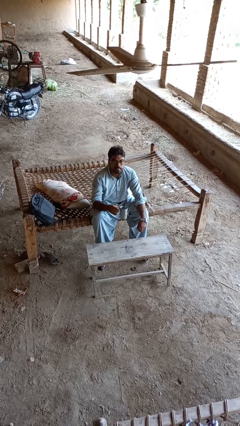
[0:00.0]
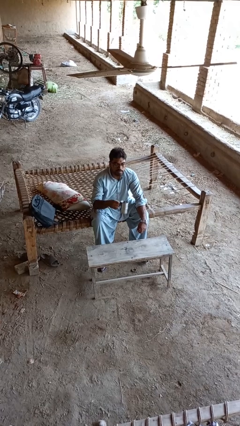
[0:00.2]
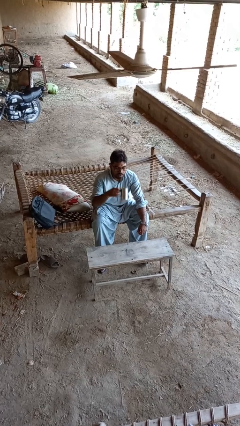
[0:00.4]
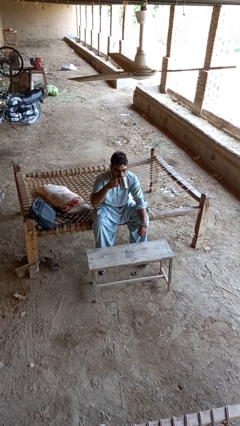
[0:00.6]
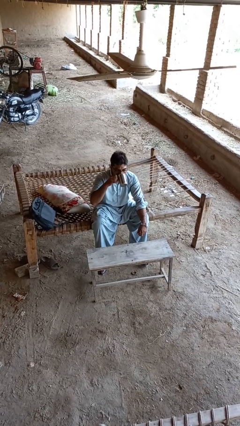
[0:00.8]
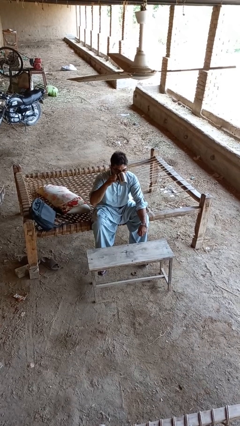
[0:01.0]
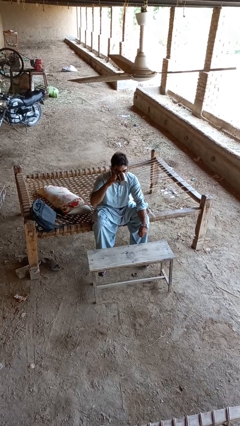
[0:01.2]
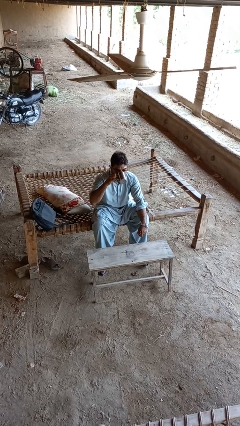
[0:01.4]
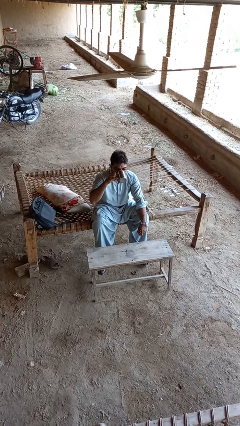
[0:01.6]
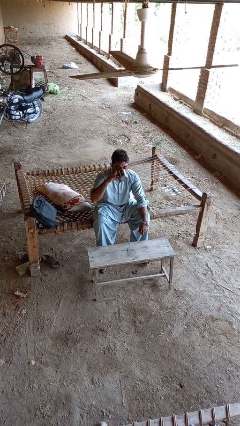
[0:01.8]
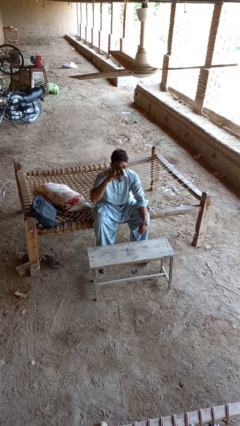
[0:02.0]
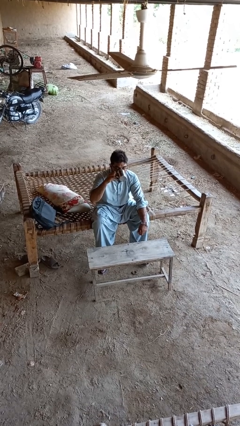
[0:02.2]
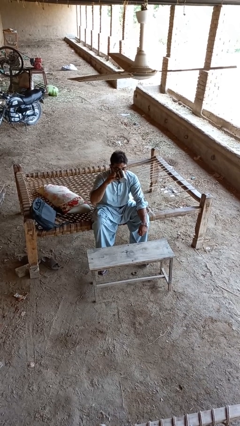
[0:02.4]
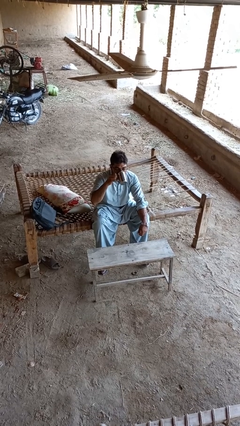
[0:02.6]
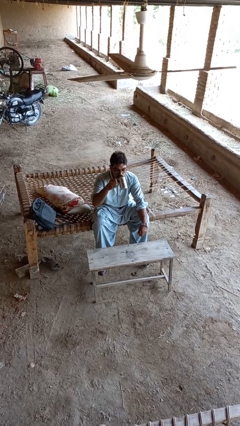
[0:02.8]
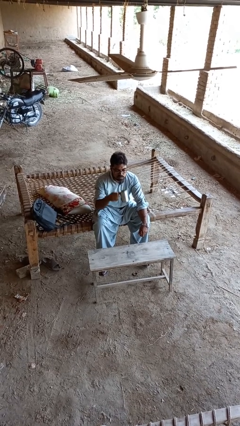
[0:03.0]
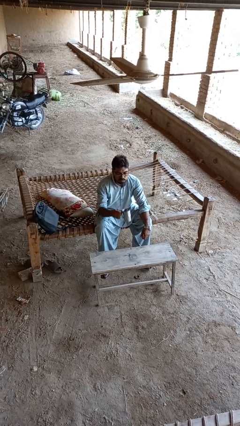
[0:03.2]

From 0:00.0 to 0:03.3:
person drinks from mug

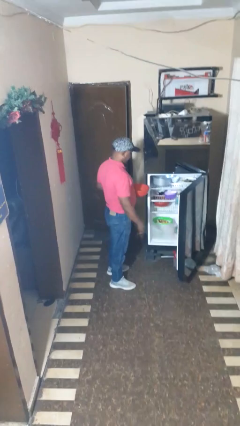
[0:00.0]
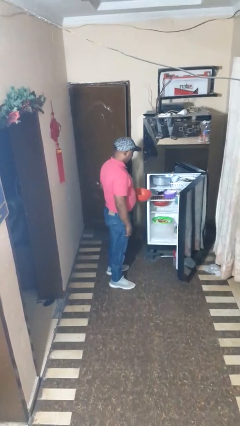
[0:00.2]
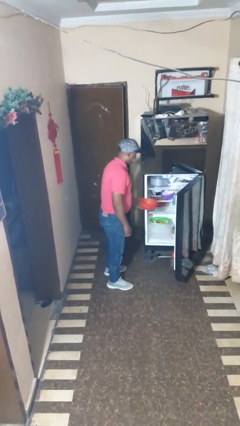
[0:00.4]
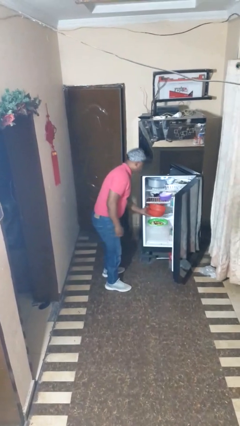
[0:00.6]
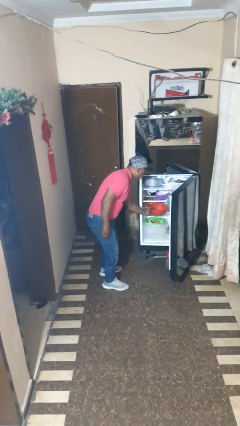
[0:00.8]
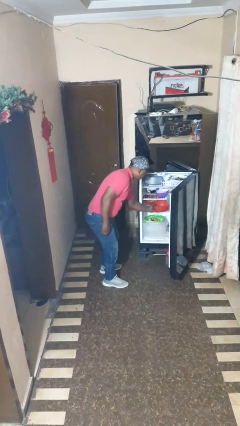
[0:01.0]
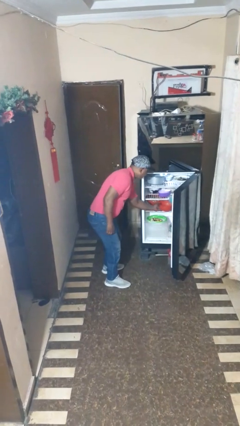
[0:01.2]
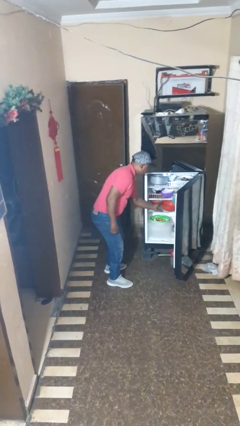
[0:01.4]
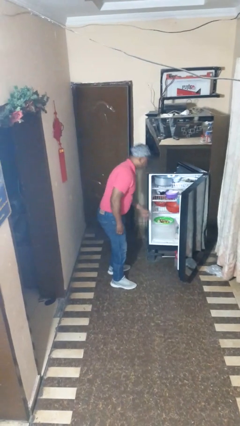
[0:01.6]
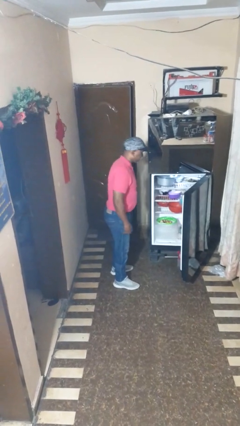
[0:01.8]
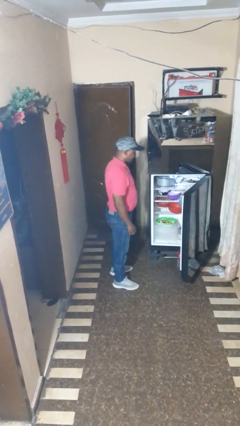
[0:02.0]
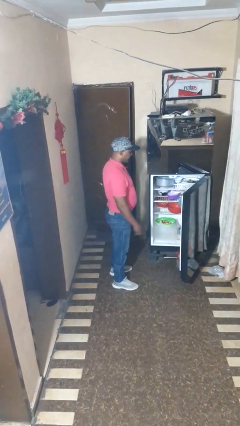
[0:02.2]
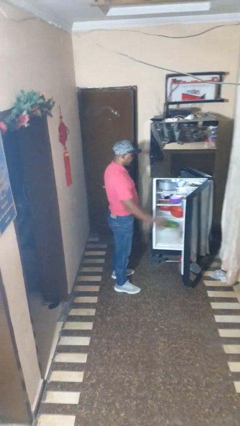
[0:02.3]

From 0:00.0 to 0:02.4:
person puts object into refrigerator

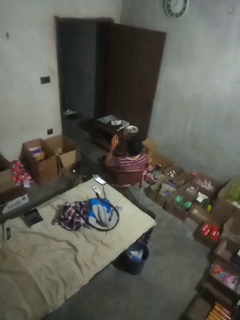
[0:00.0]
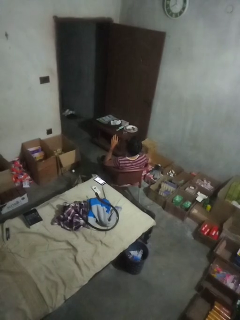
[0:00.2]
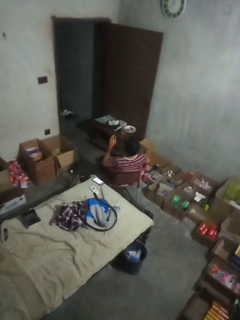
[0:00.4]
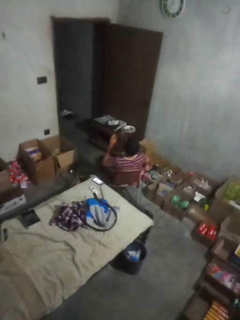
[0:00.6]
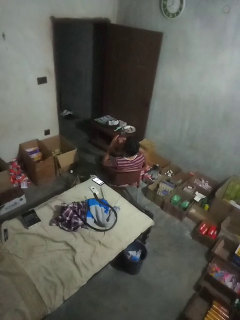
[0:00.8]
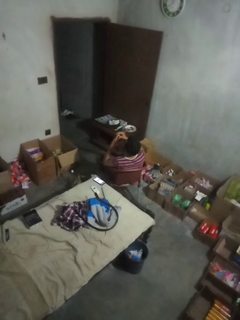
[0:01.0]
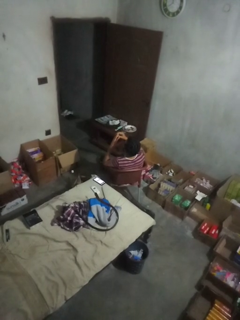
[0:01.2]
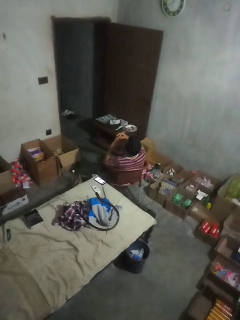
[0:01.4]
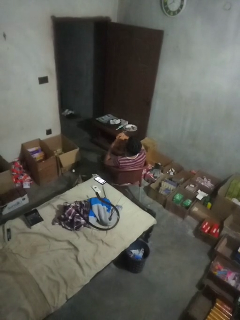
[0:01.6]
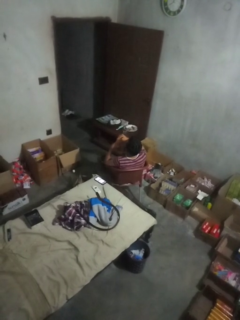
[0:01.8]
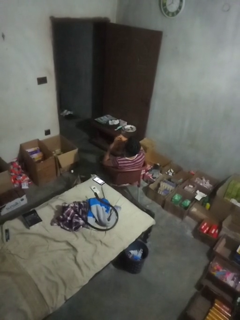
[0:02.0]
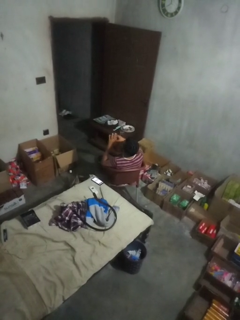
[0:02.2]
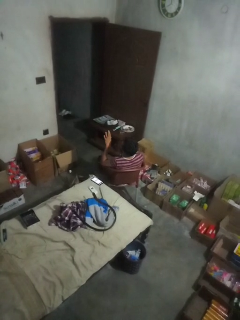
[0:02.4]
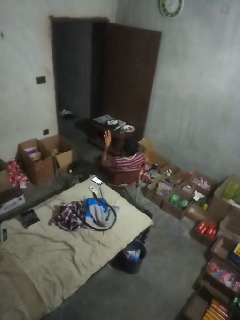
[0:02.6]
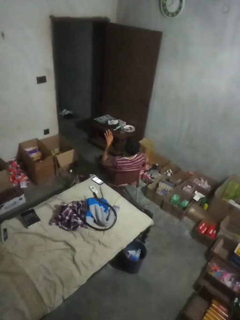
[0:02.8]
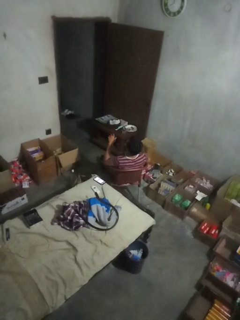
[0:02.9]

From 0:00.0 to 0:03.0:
person puts on ring

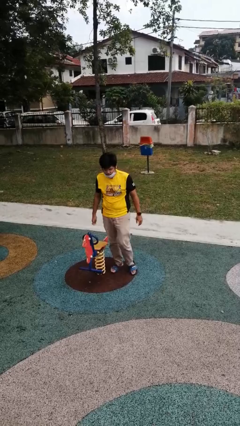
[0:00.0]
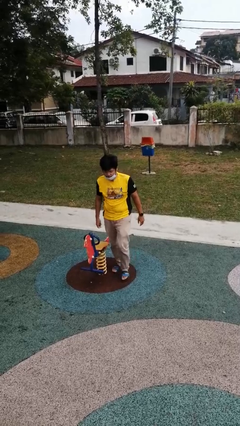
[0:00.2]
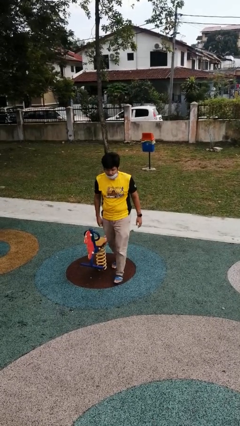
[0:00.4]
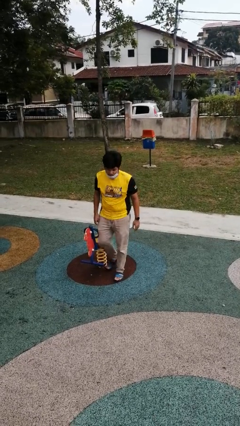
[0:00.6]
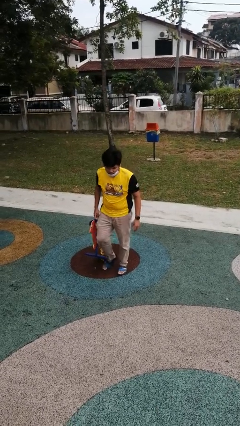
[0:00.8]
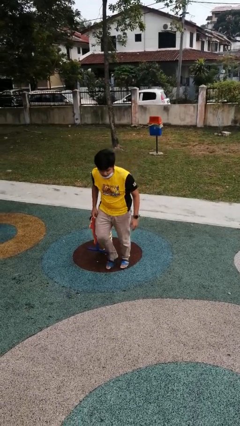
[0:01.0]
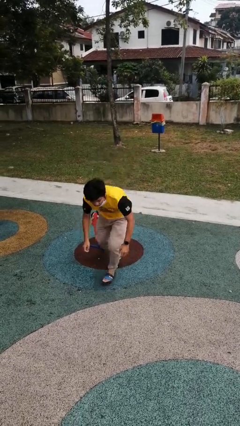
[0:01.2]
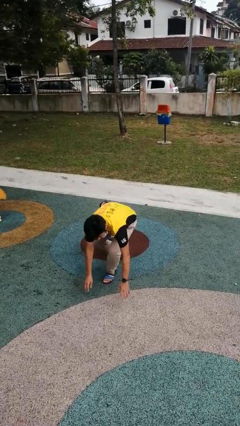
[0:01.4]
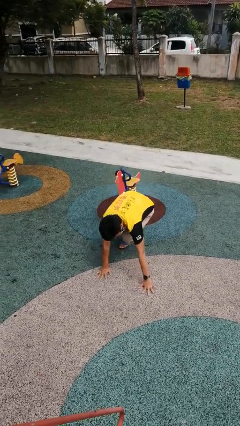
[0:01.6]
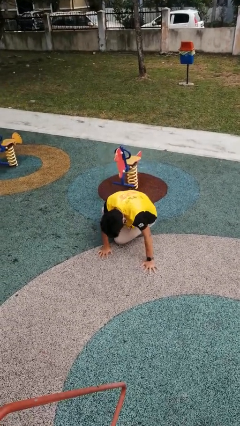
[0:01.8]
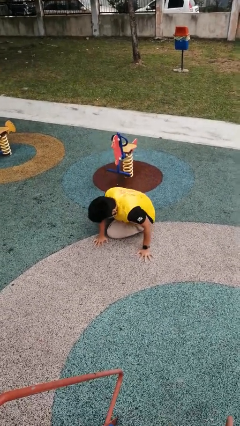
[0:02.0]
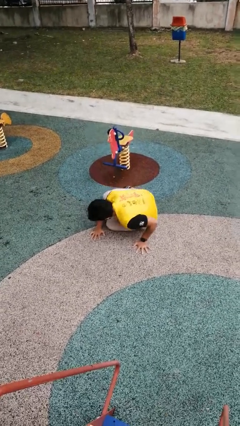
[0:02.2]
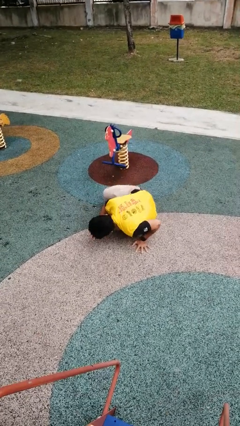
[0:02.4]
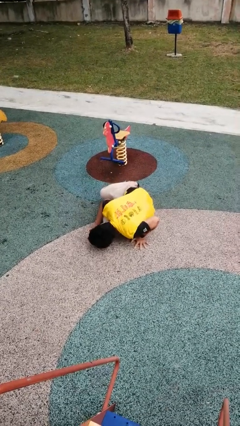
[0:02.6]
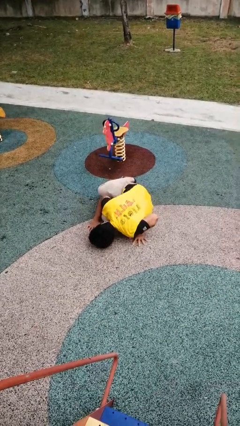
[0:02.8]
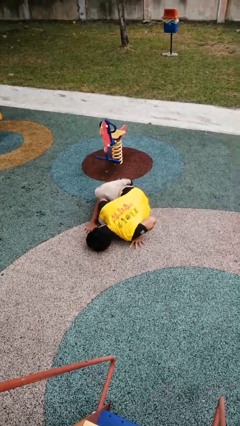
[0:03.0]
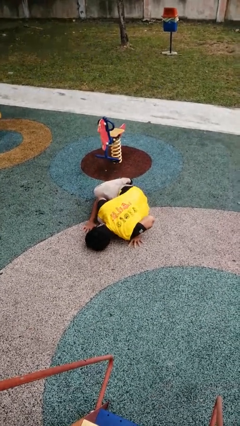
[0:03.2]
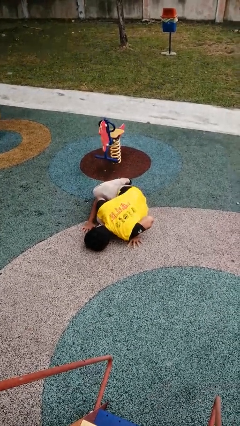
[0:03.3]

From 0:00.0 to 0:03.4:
person trips on object on floor

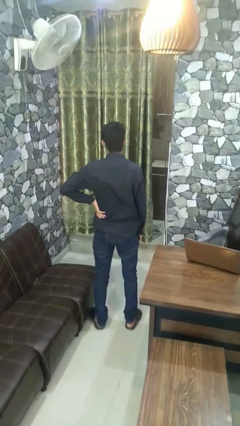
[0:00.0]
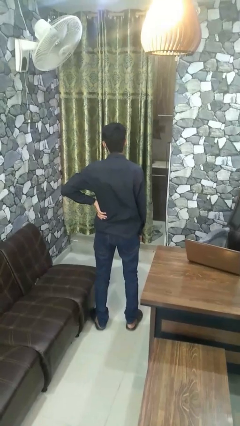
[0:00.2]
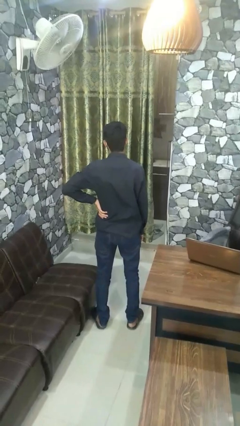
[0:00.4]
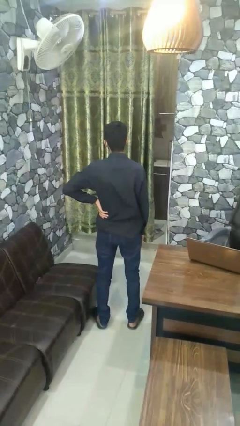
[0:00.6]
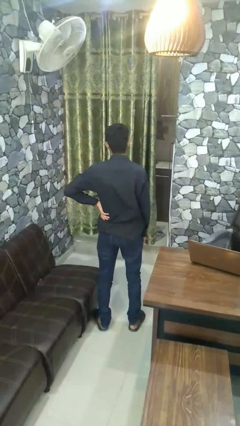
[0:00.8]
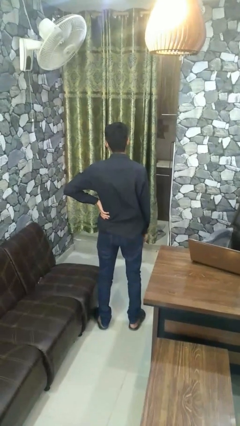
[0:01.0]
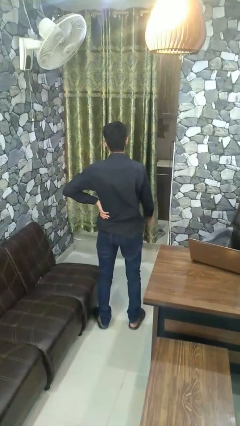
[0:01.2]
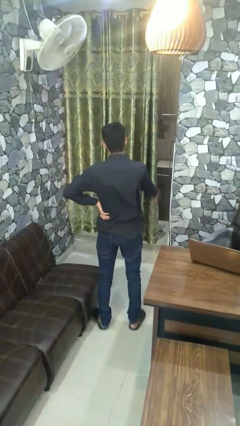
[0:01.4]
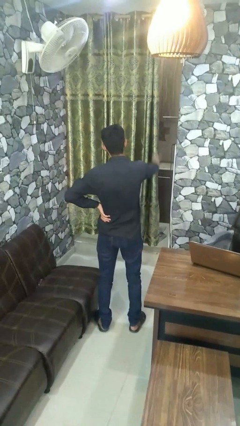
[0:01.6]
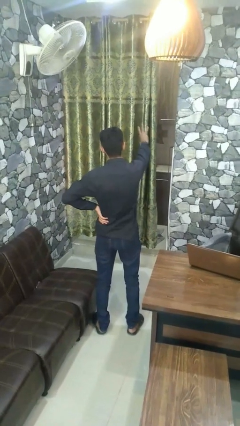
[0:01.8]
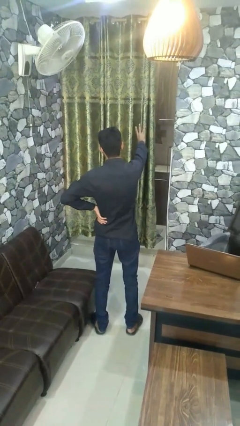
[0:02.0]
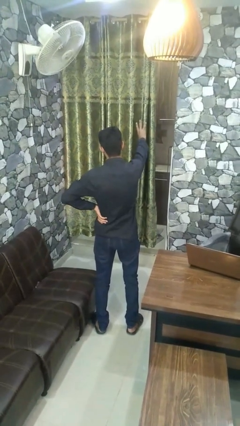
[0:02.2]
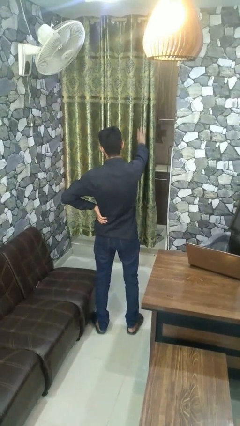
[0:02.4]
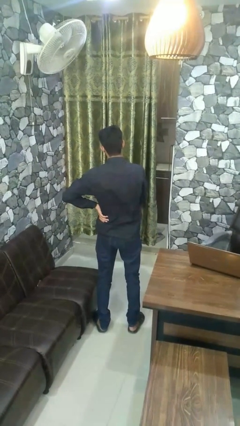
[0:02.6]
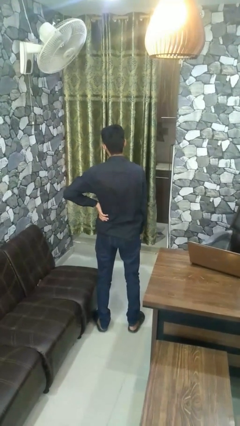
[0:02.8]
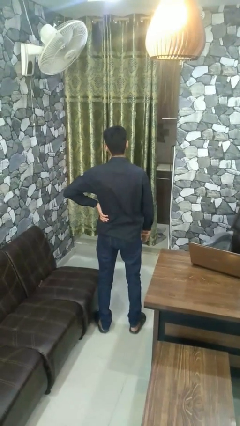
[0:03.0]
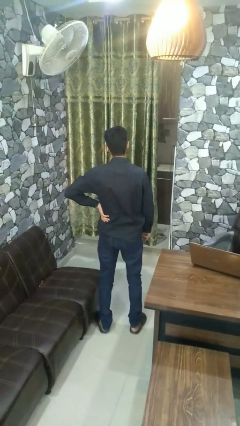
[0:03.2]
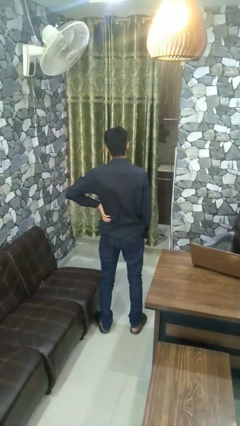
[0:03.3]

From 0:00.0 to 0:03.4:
person gestures number three

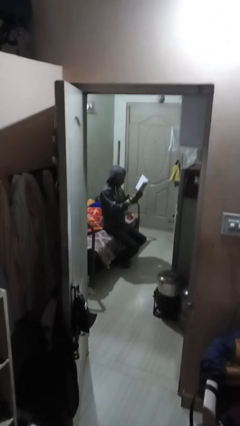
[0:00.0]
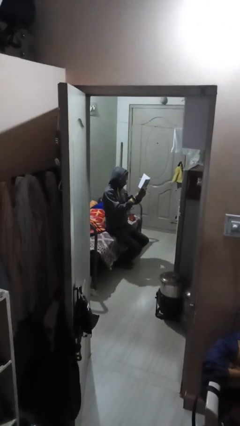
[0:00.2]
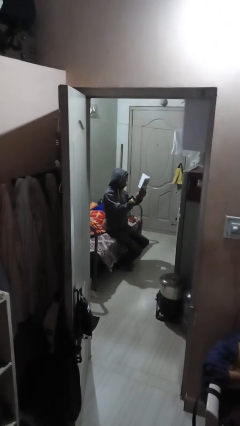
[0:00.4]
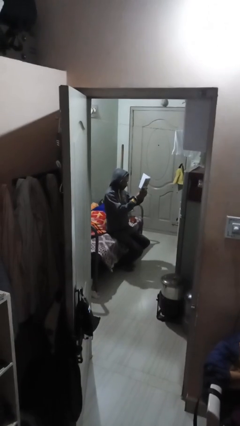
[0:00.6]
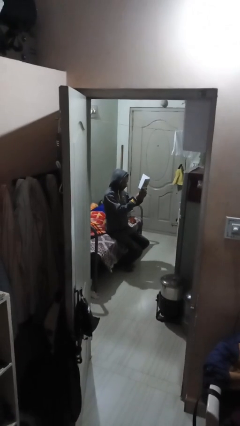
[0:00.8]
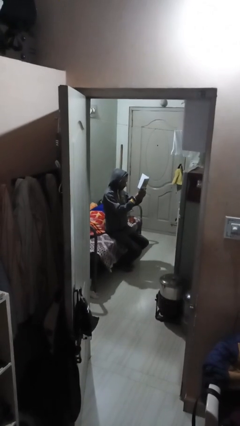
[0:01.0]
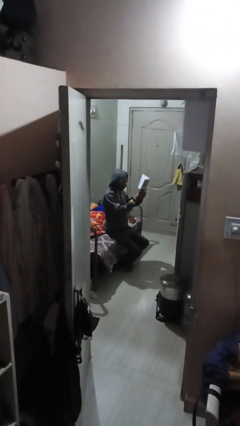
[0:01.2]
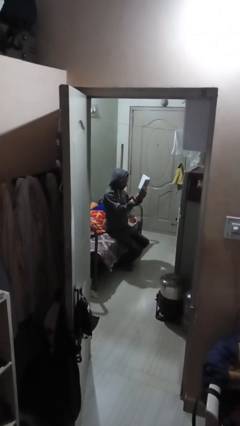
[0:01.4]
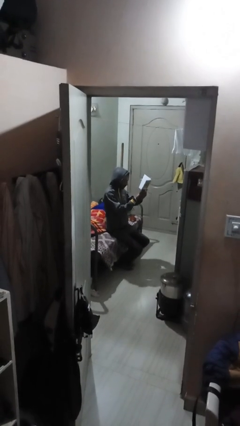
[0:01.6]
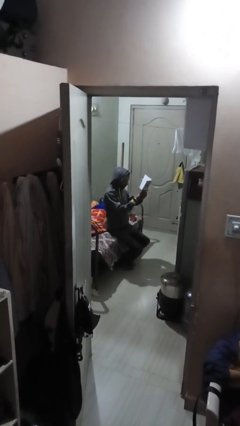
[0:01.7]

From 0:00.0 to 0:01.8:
person reads document

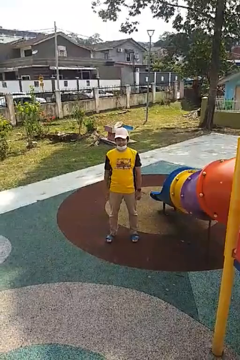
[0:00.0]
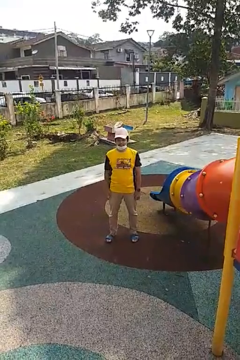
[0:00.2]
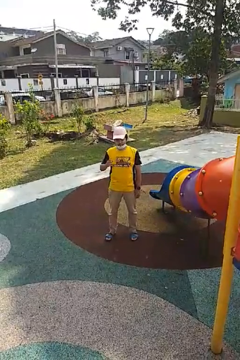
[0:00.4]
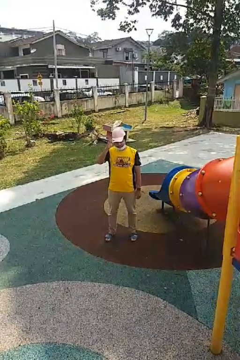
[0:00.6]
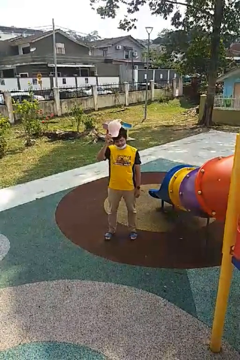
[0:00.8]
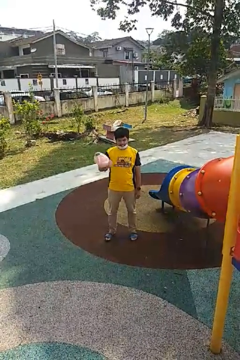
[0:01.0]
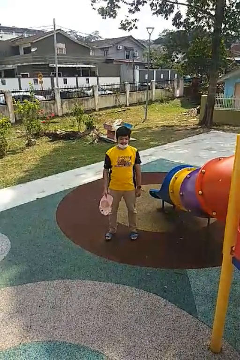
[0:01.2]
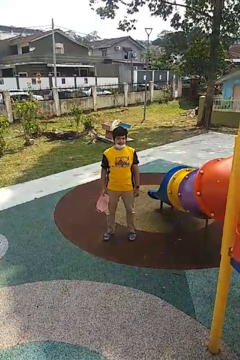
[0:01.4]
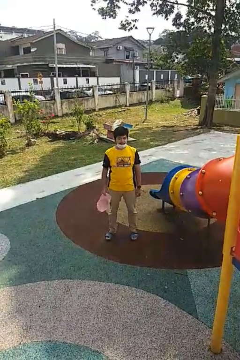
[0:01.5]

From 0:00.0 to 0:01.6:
person takes off hat
